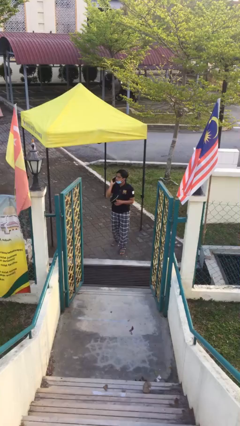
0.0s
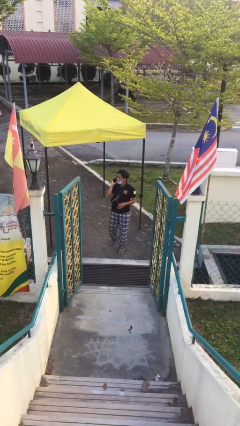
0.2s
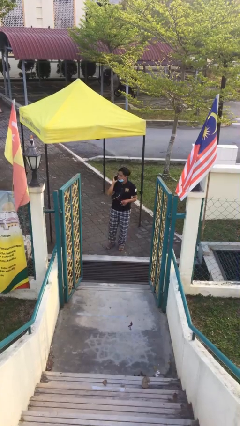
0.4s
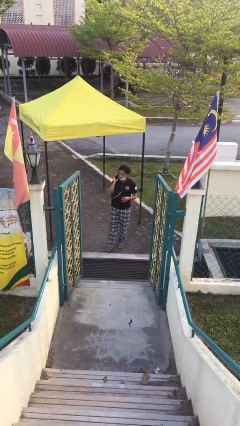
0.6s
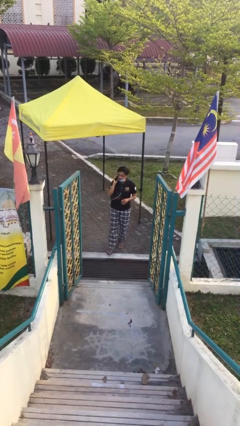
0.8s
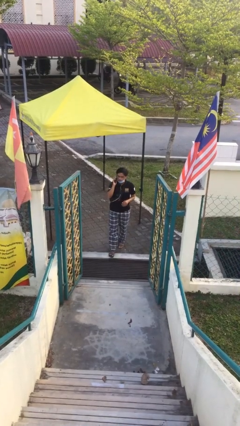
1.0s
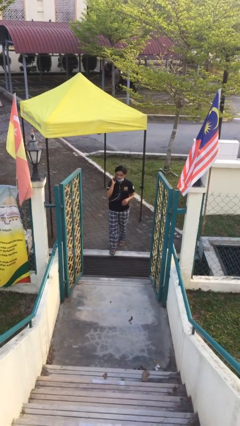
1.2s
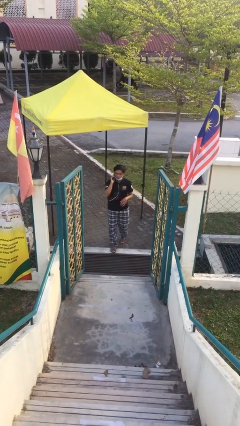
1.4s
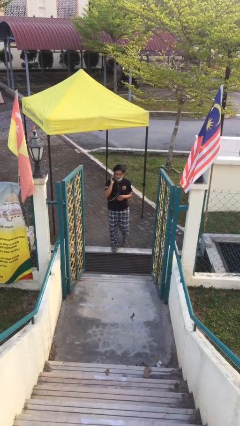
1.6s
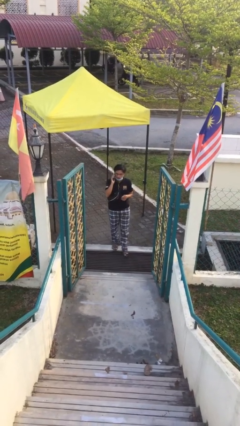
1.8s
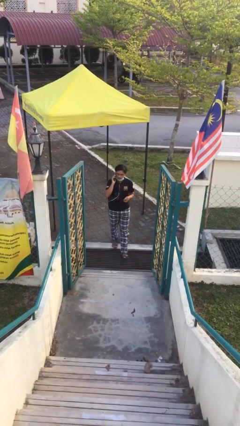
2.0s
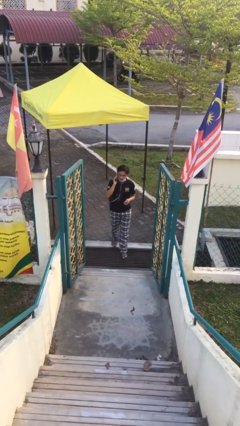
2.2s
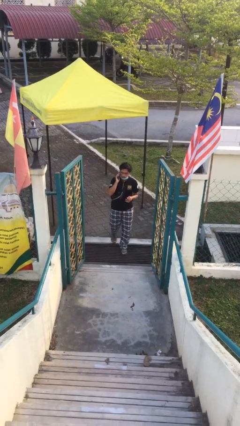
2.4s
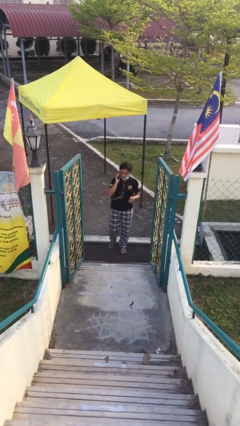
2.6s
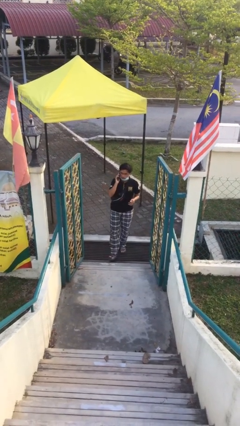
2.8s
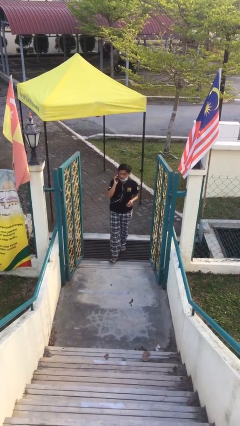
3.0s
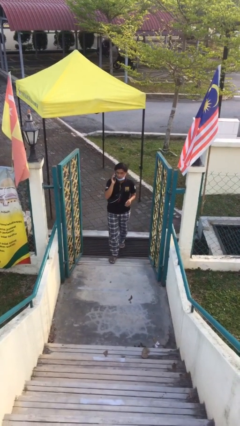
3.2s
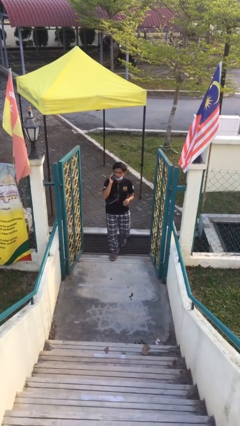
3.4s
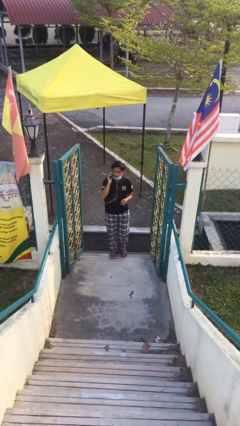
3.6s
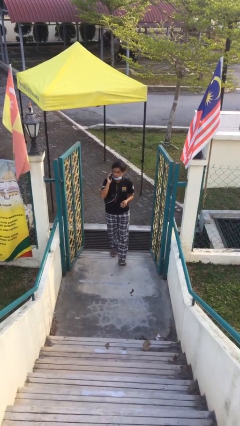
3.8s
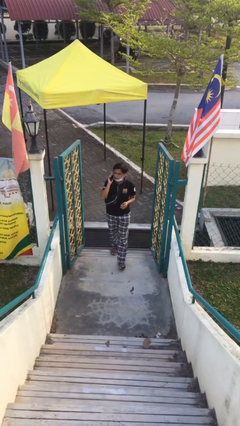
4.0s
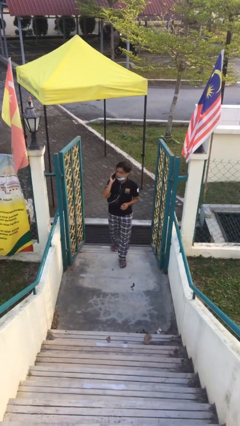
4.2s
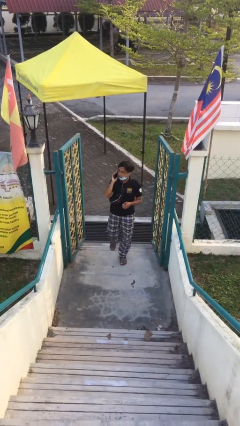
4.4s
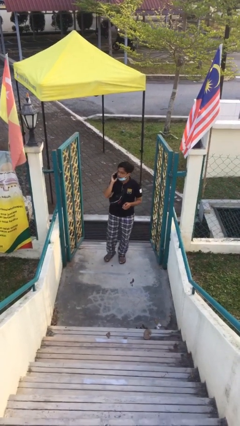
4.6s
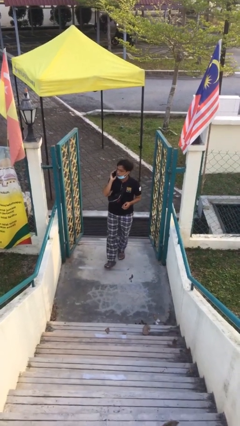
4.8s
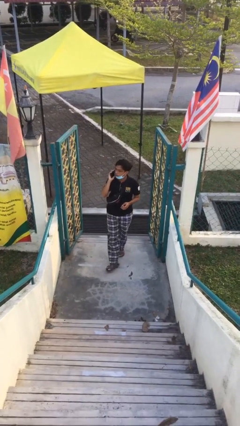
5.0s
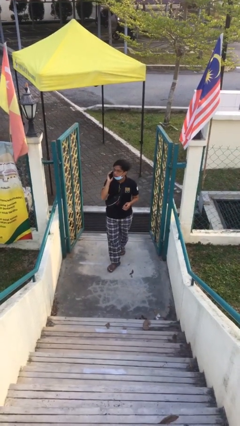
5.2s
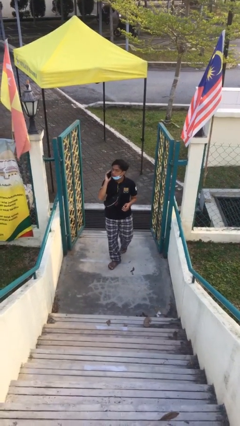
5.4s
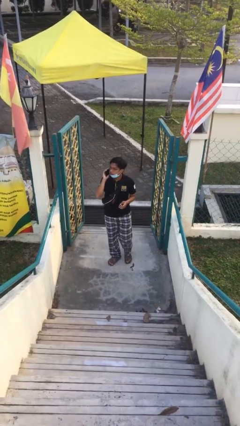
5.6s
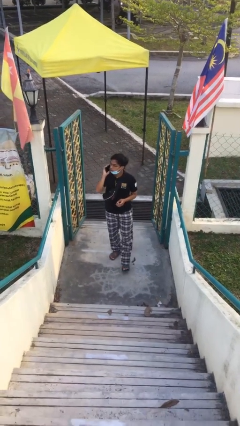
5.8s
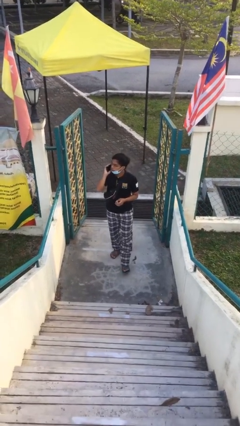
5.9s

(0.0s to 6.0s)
person enters scene through structure

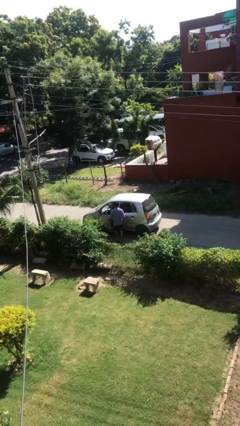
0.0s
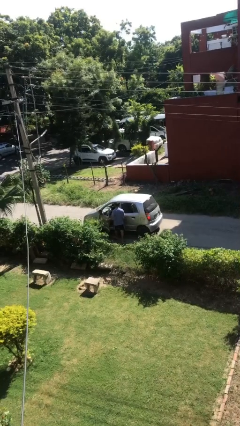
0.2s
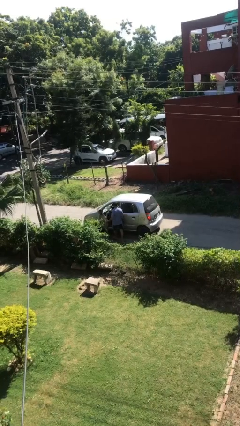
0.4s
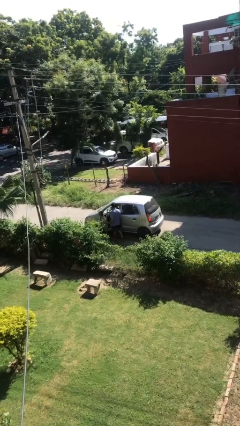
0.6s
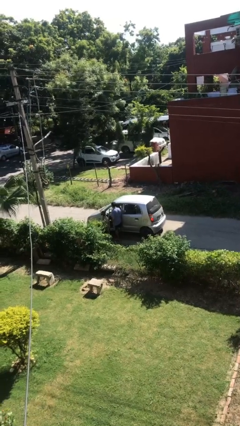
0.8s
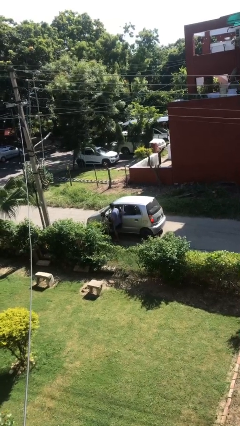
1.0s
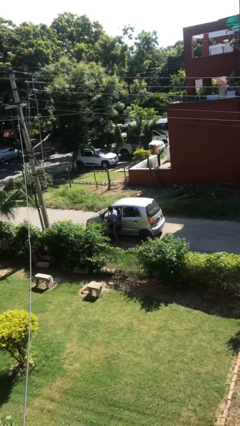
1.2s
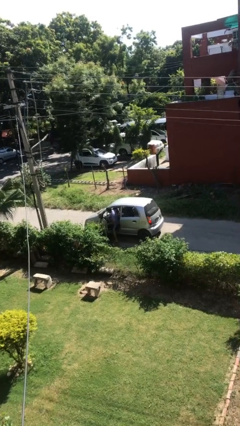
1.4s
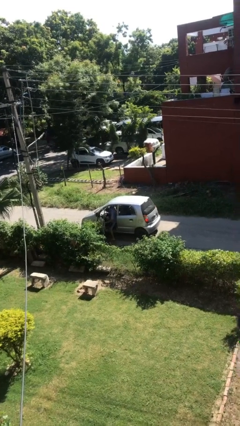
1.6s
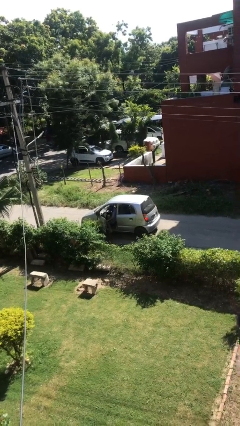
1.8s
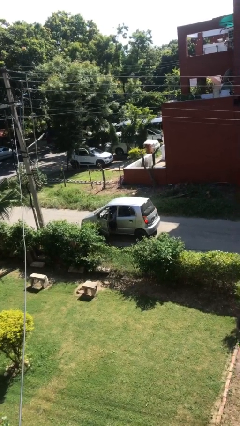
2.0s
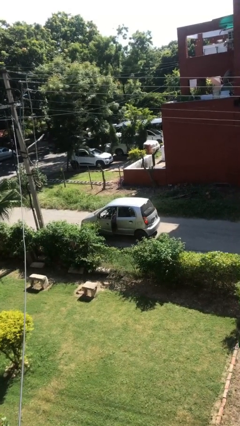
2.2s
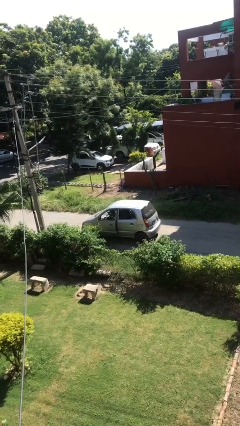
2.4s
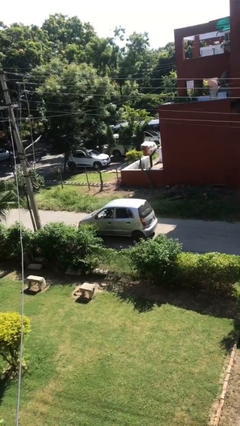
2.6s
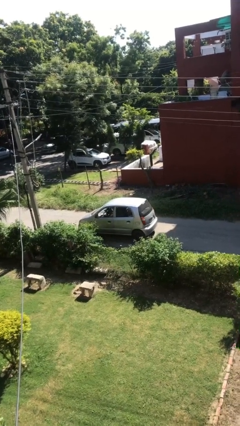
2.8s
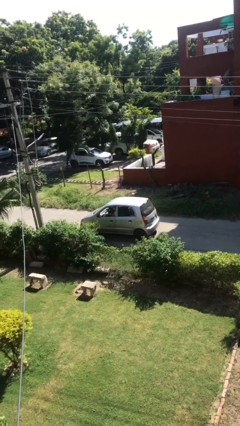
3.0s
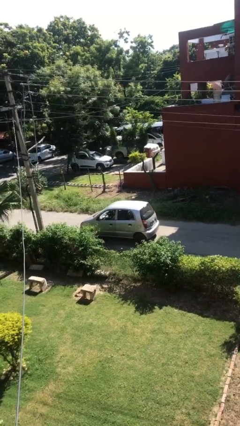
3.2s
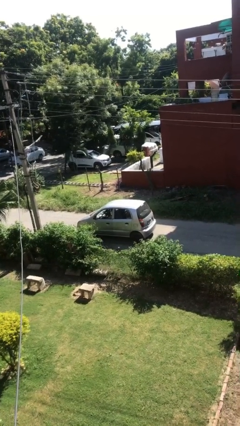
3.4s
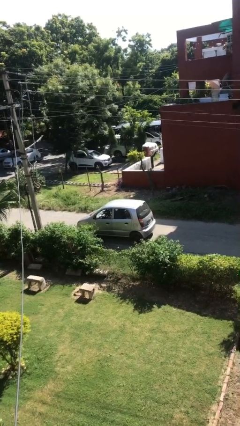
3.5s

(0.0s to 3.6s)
car picks up person

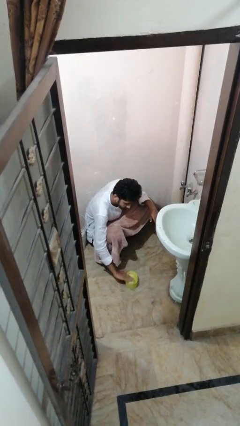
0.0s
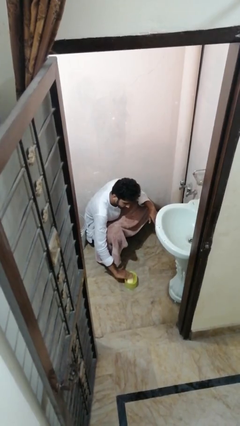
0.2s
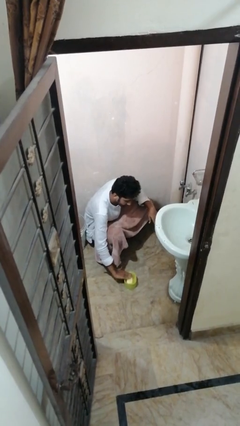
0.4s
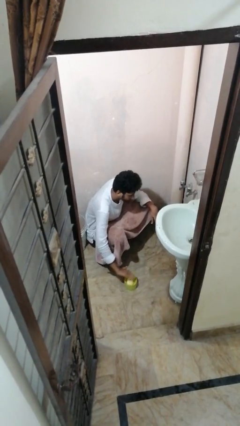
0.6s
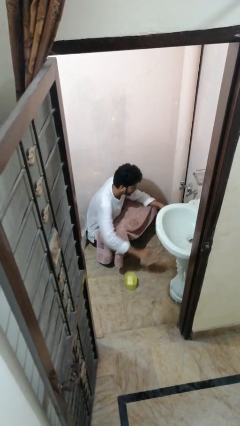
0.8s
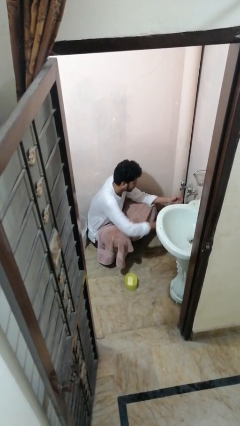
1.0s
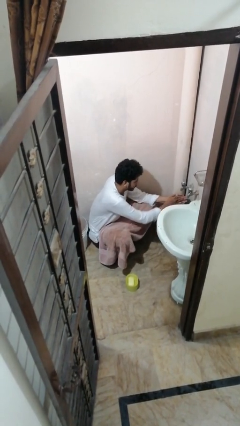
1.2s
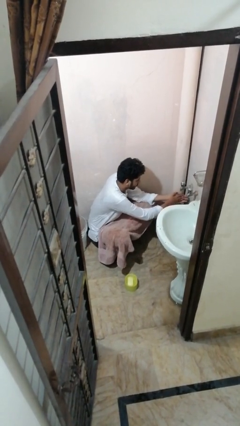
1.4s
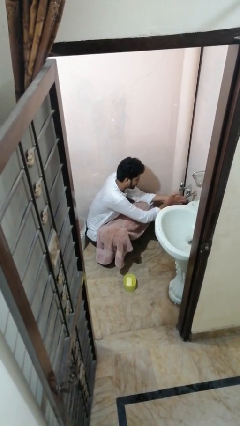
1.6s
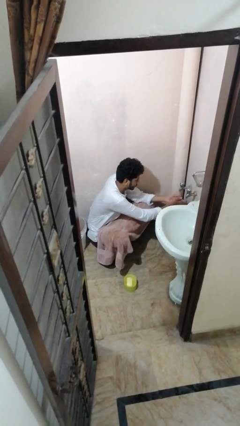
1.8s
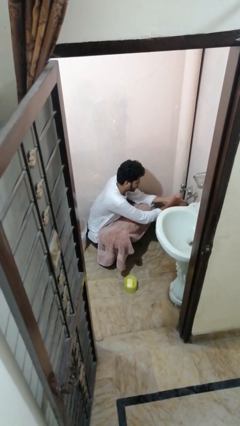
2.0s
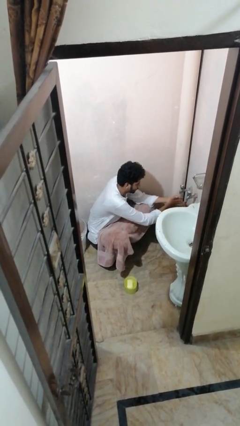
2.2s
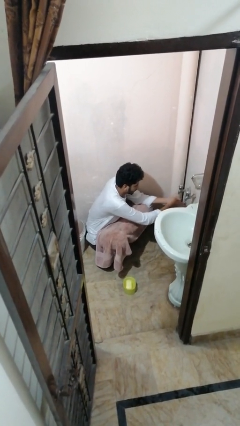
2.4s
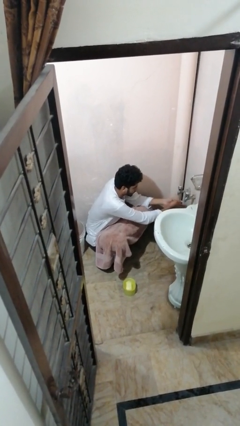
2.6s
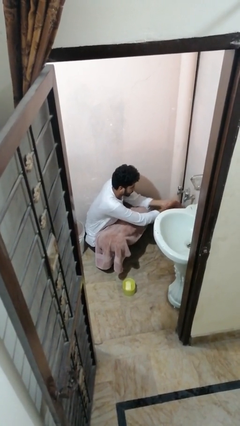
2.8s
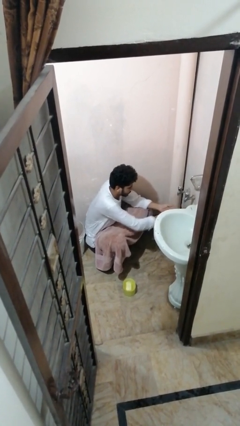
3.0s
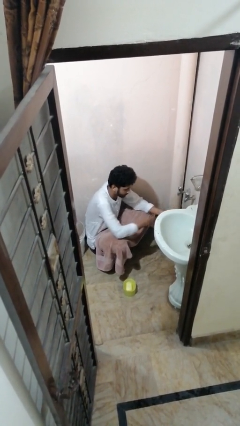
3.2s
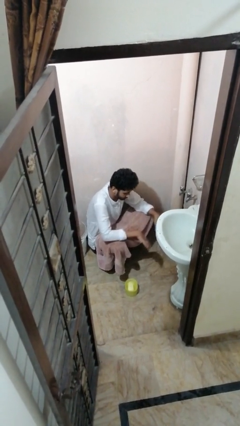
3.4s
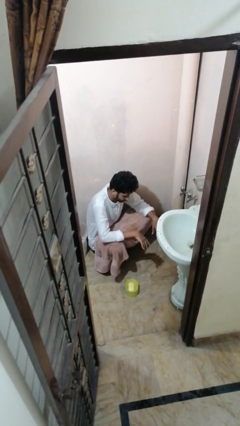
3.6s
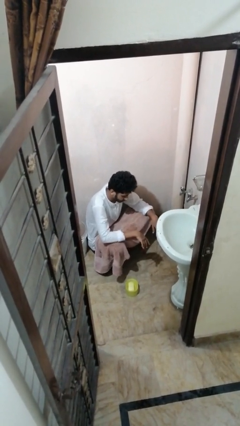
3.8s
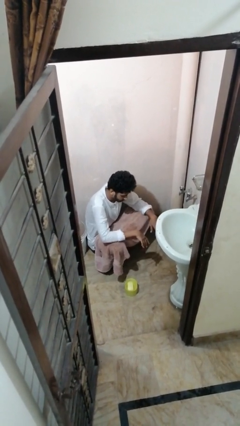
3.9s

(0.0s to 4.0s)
person washes hands

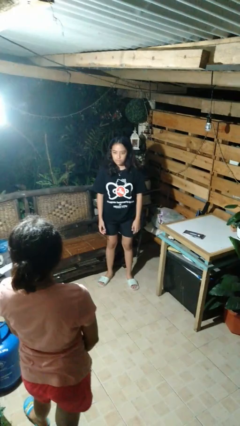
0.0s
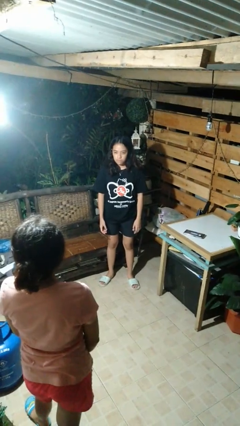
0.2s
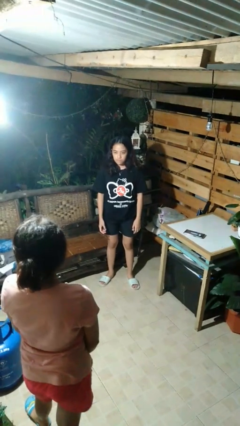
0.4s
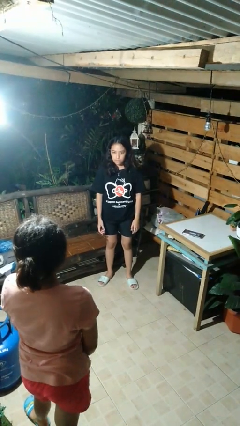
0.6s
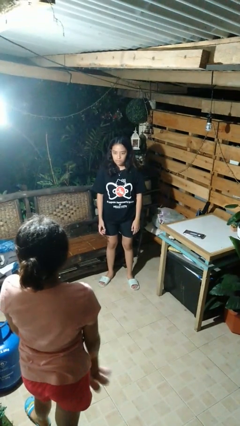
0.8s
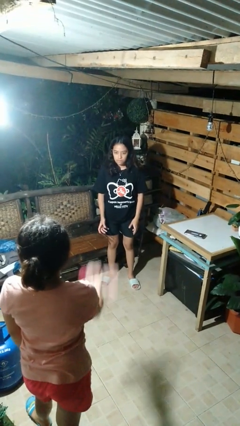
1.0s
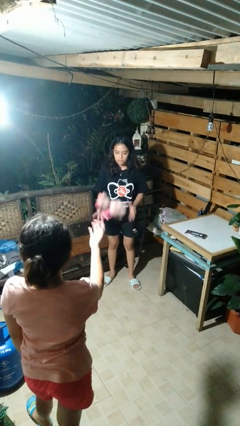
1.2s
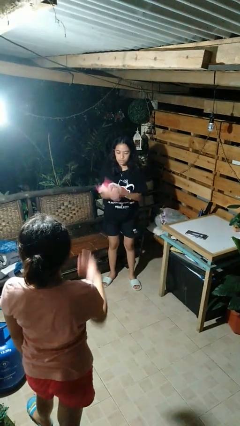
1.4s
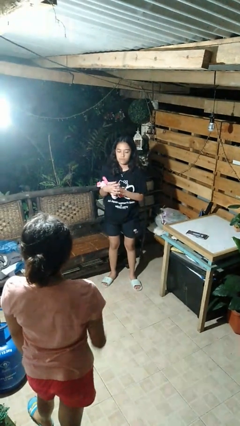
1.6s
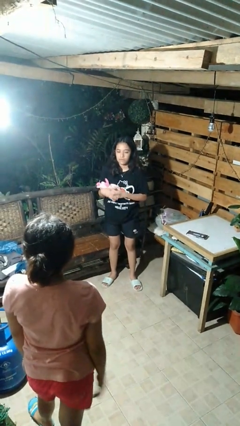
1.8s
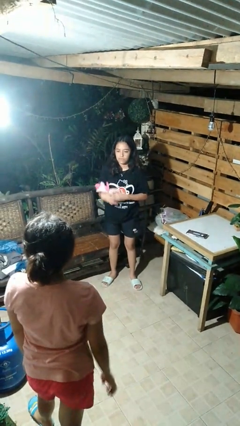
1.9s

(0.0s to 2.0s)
person catches object from person

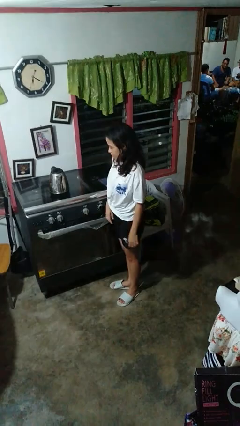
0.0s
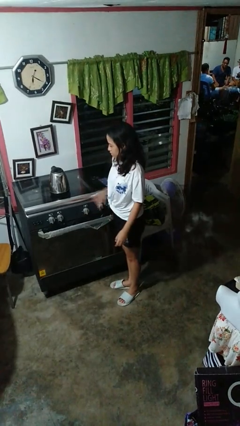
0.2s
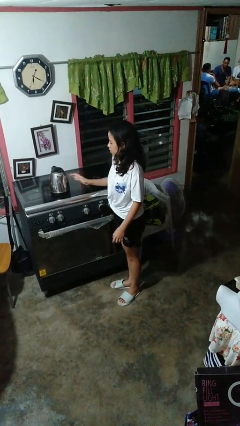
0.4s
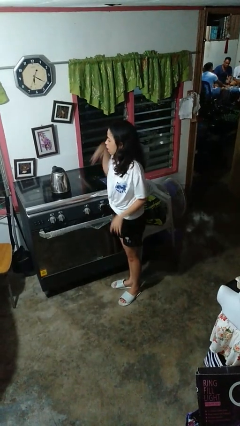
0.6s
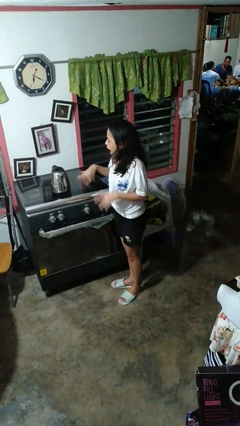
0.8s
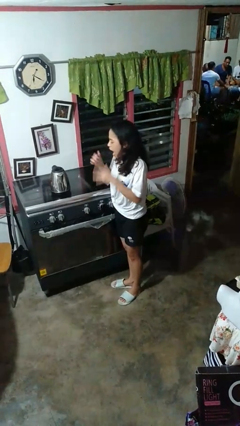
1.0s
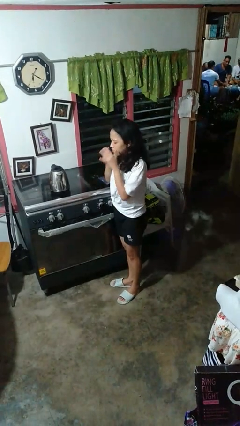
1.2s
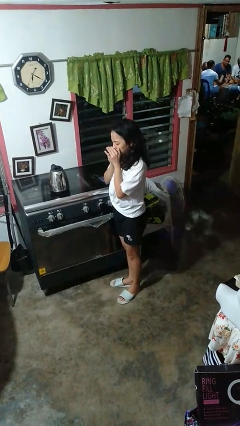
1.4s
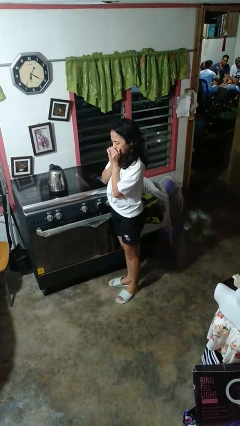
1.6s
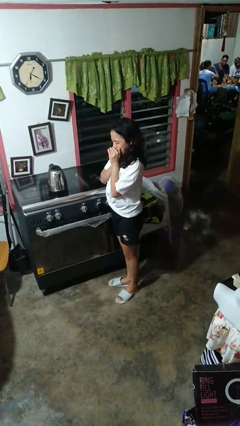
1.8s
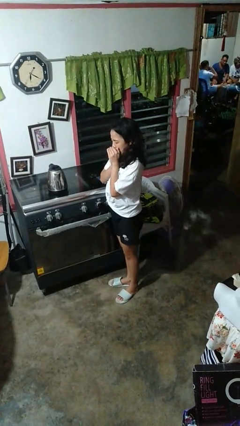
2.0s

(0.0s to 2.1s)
person burns hand
